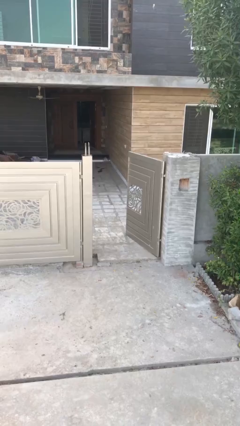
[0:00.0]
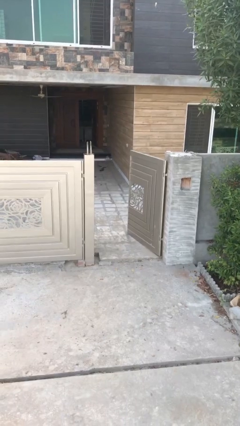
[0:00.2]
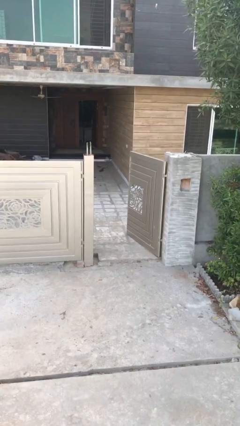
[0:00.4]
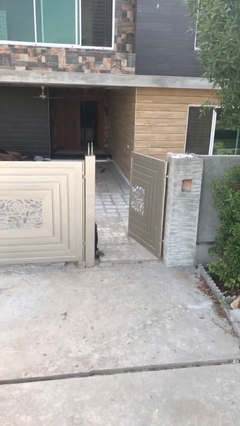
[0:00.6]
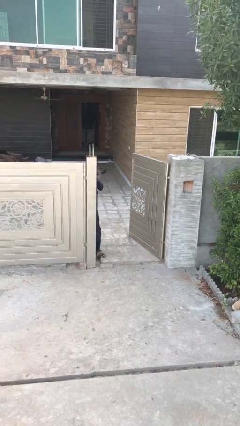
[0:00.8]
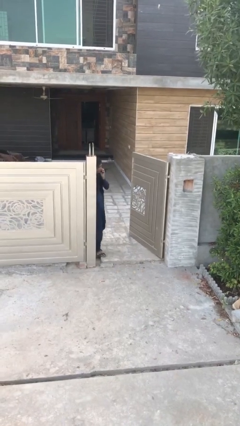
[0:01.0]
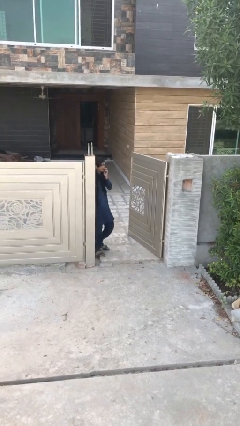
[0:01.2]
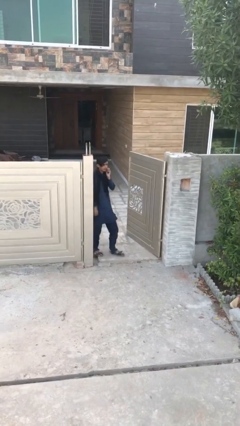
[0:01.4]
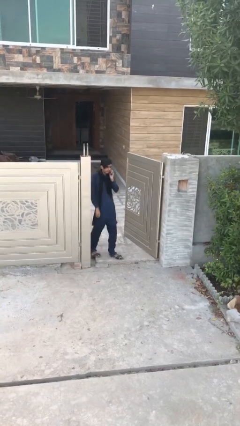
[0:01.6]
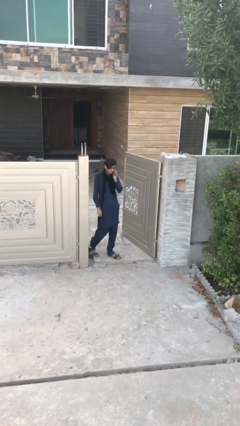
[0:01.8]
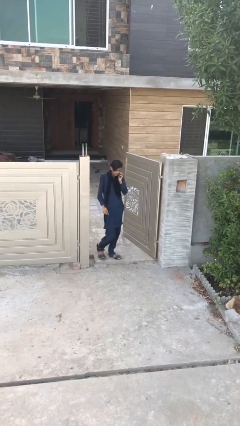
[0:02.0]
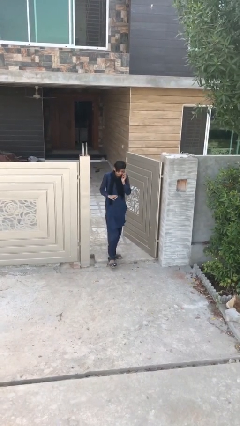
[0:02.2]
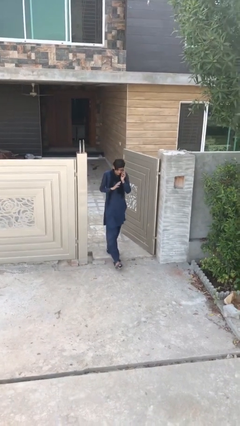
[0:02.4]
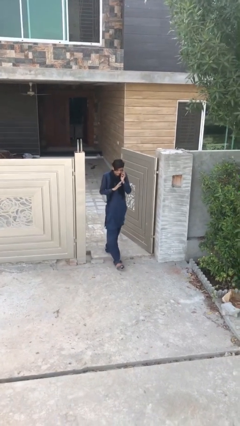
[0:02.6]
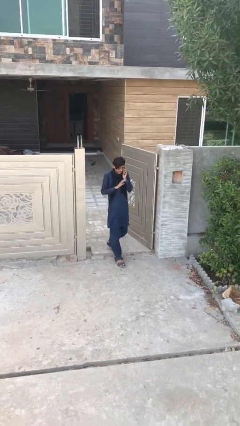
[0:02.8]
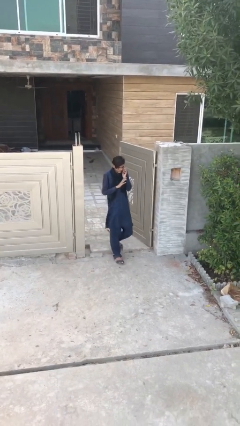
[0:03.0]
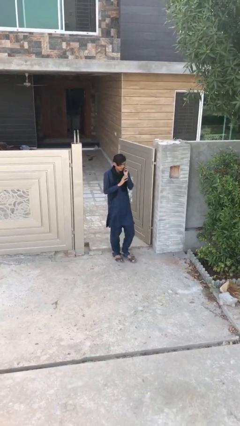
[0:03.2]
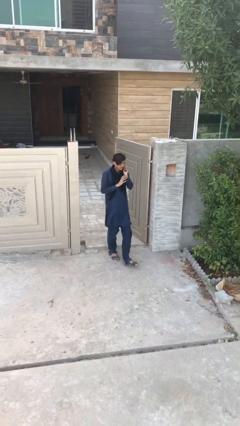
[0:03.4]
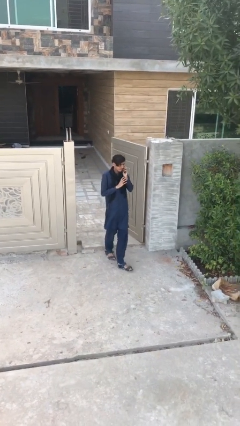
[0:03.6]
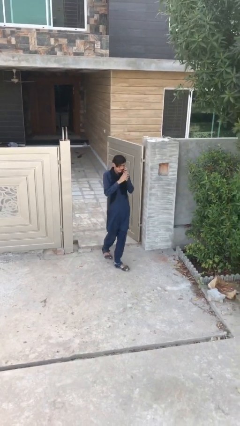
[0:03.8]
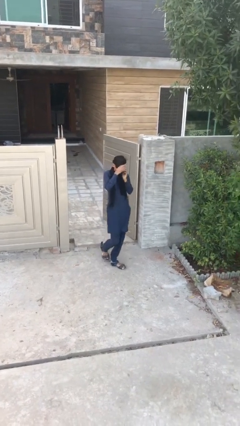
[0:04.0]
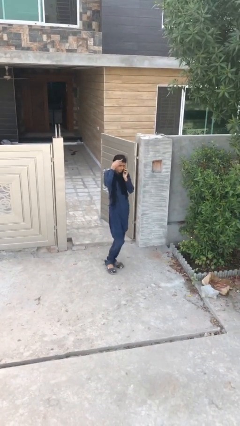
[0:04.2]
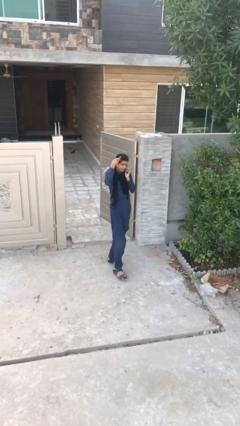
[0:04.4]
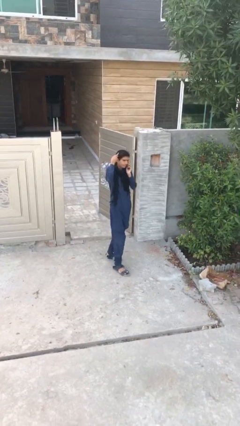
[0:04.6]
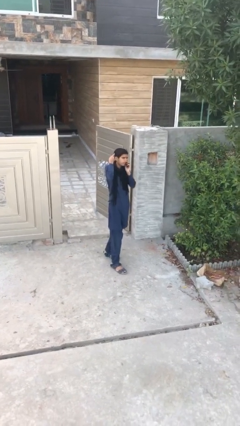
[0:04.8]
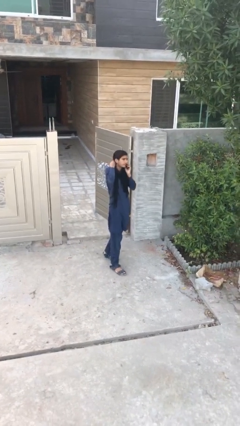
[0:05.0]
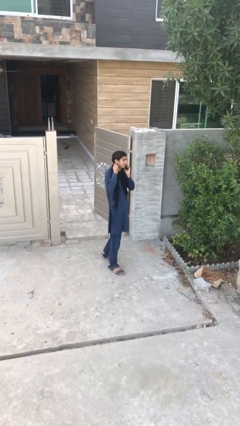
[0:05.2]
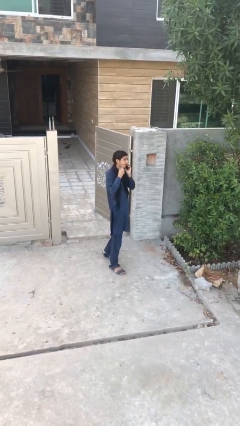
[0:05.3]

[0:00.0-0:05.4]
person enters scene through structure

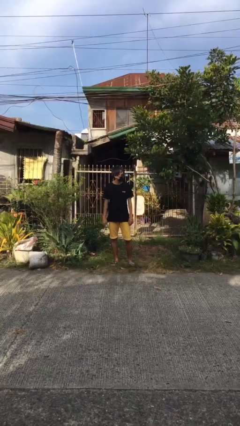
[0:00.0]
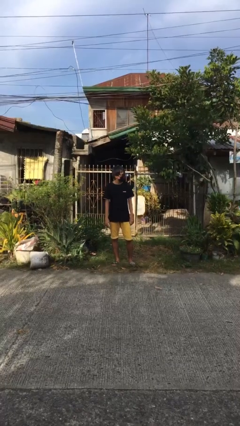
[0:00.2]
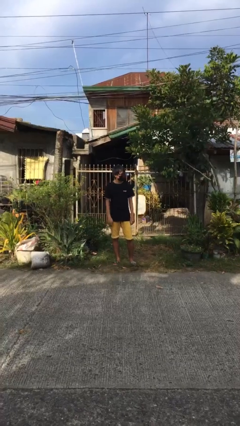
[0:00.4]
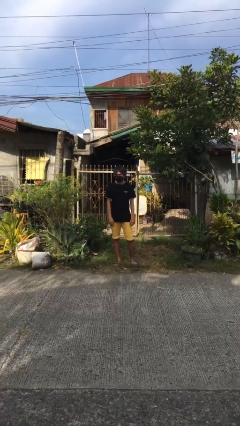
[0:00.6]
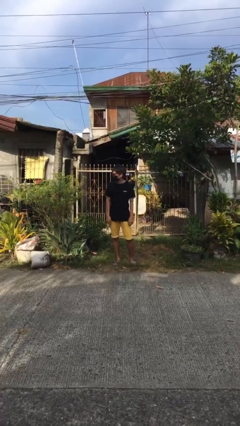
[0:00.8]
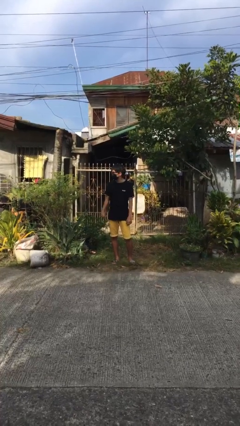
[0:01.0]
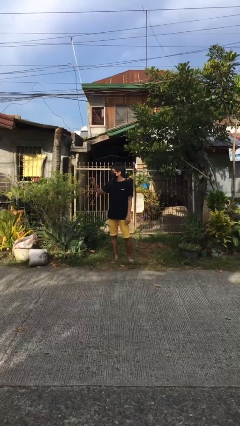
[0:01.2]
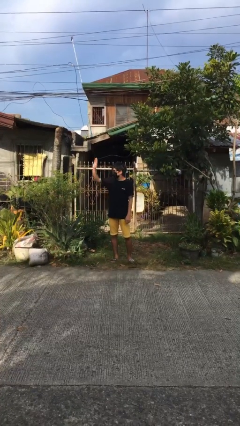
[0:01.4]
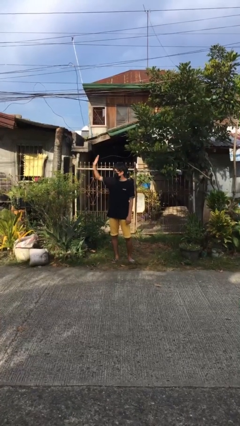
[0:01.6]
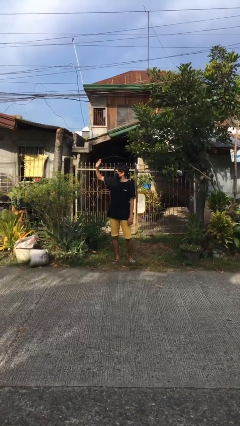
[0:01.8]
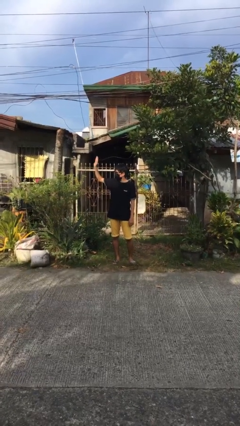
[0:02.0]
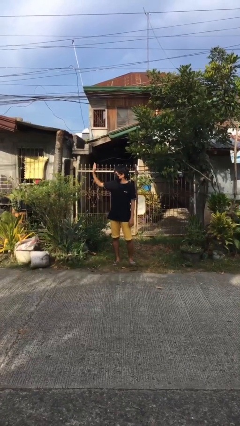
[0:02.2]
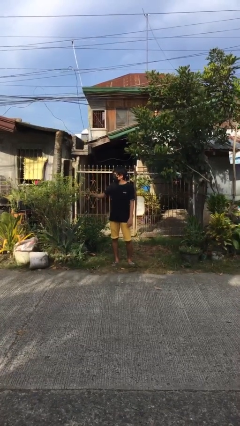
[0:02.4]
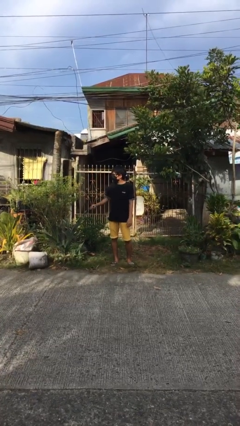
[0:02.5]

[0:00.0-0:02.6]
person waves at person

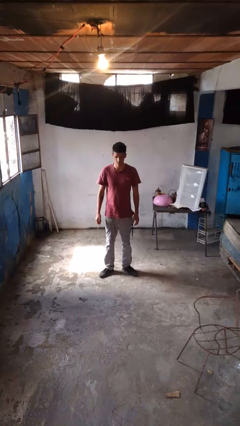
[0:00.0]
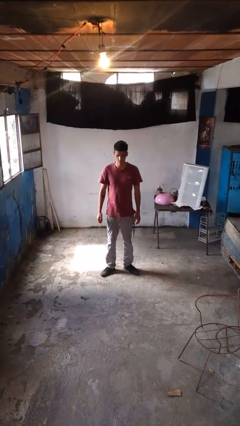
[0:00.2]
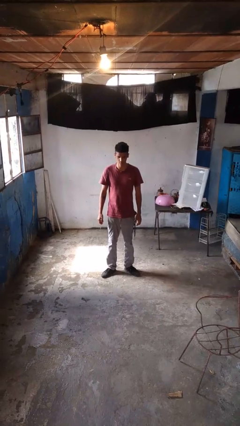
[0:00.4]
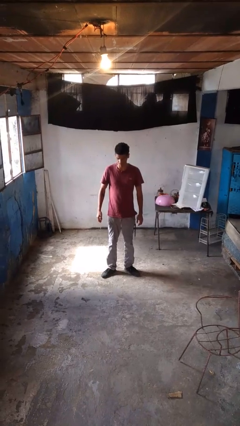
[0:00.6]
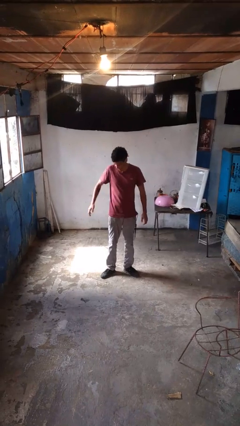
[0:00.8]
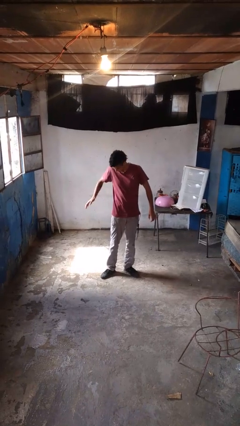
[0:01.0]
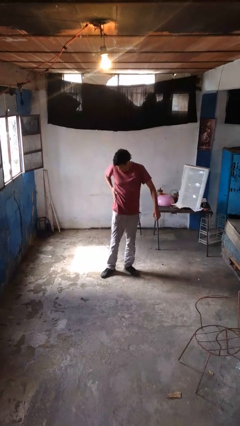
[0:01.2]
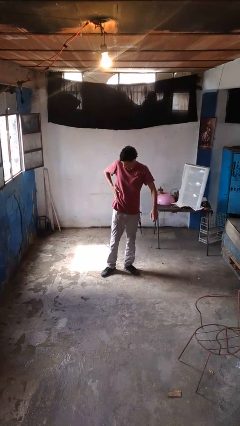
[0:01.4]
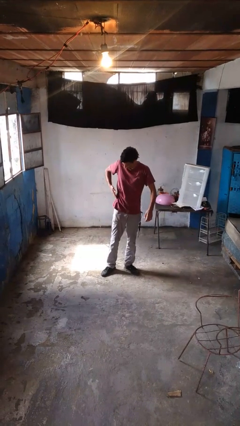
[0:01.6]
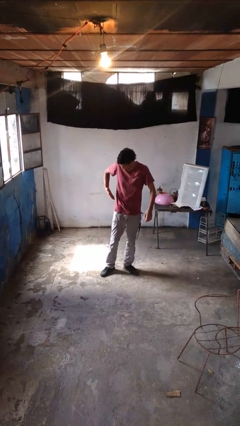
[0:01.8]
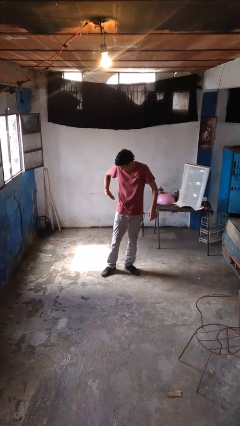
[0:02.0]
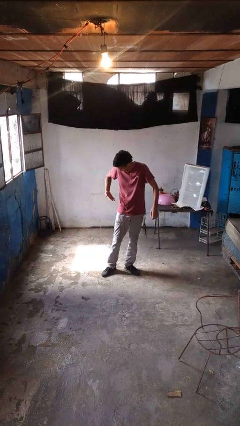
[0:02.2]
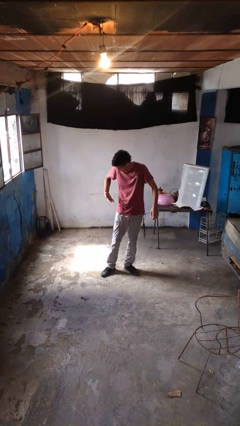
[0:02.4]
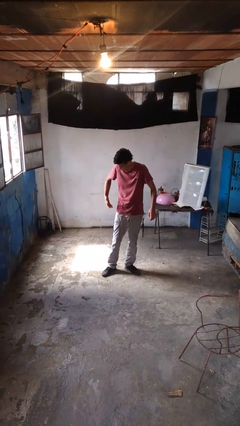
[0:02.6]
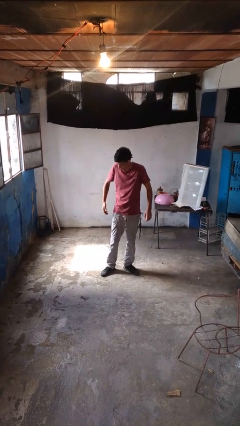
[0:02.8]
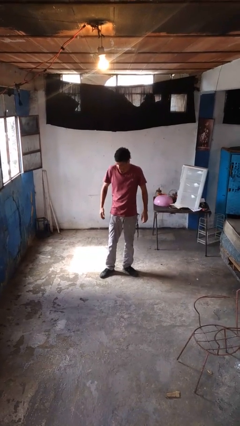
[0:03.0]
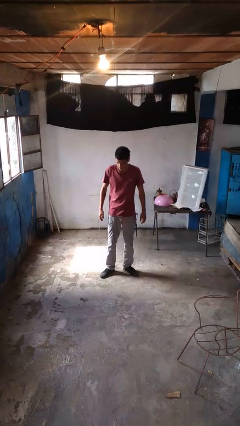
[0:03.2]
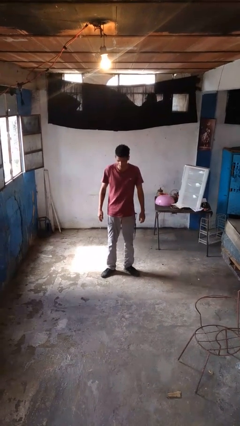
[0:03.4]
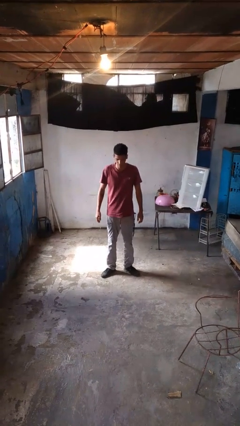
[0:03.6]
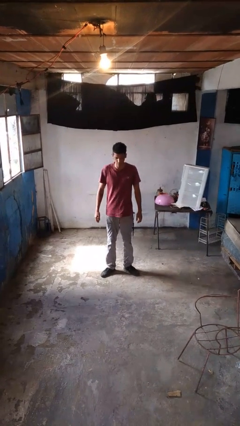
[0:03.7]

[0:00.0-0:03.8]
person swats bug

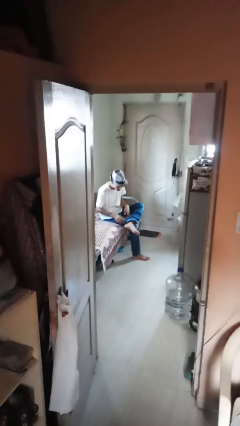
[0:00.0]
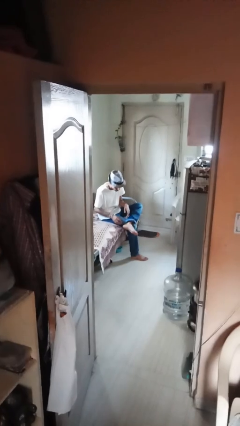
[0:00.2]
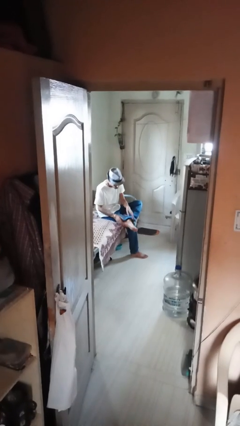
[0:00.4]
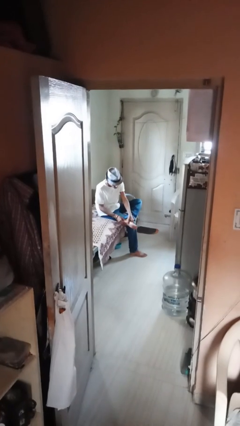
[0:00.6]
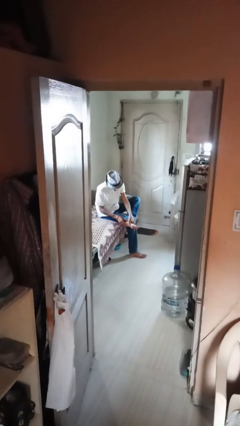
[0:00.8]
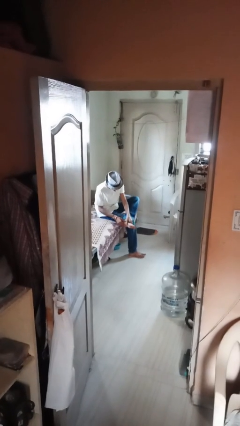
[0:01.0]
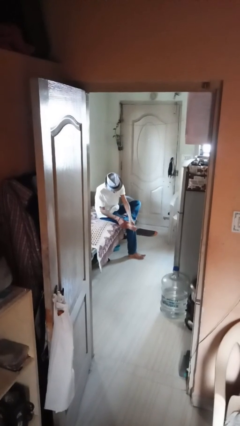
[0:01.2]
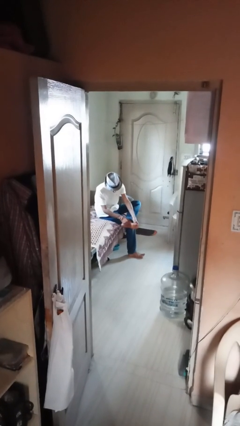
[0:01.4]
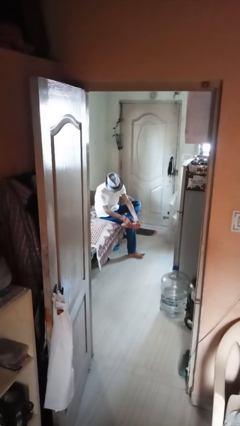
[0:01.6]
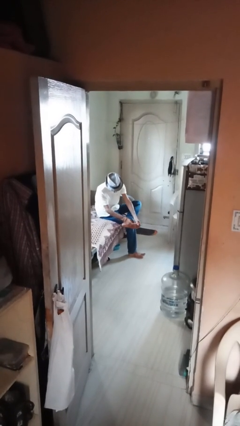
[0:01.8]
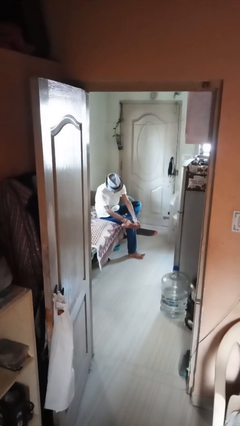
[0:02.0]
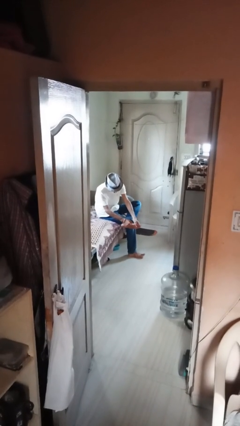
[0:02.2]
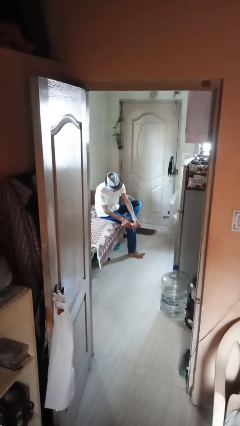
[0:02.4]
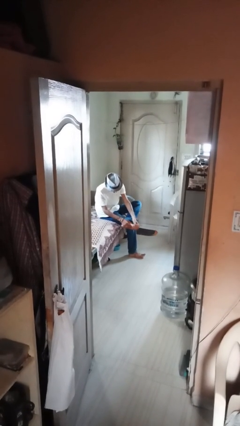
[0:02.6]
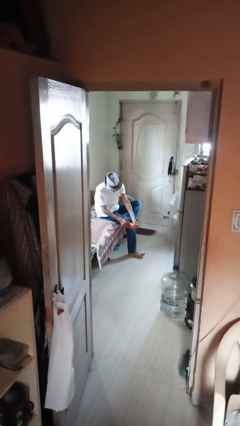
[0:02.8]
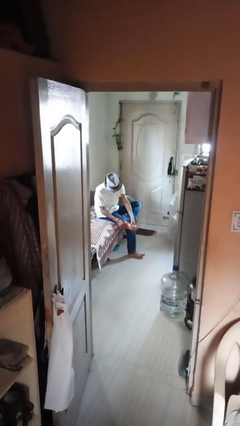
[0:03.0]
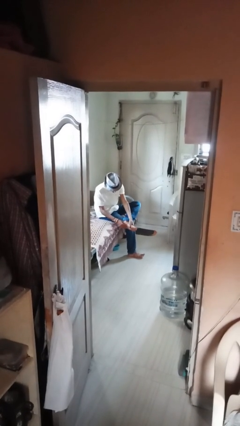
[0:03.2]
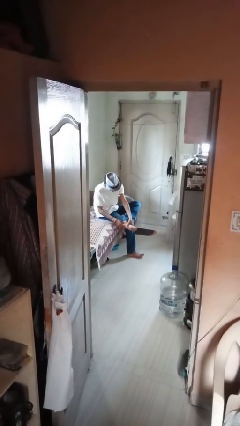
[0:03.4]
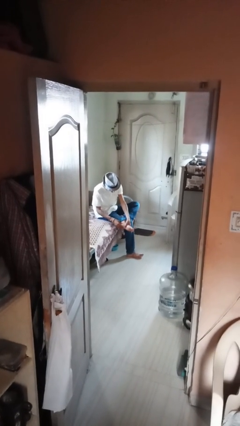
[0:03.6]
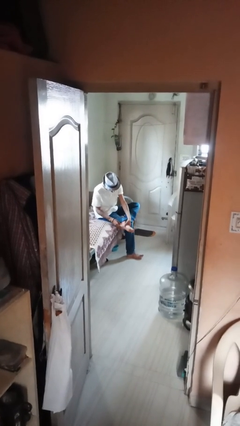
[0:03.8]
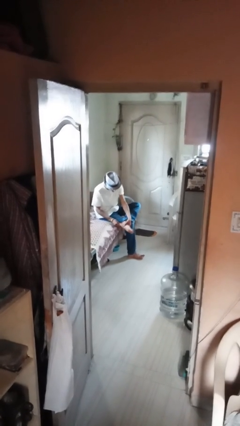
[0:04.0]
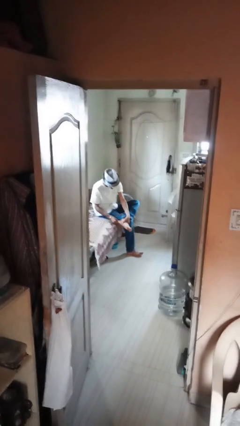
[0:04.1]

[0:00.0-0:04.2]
person rubs foot

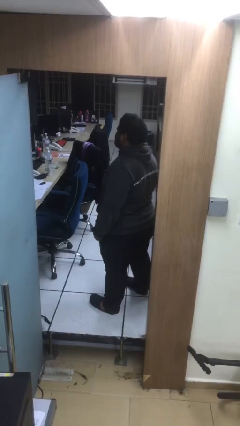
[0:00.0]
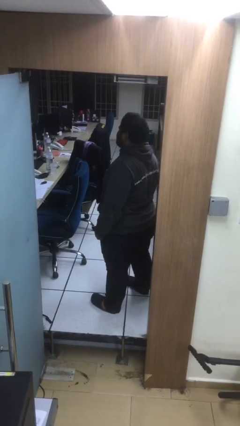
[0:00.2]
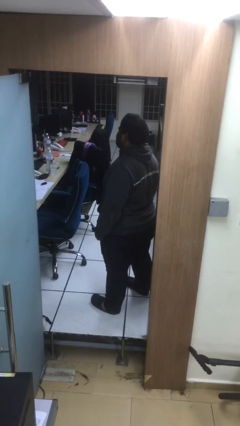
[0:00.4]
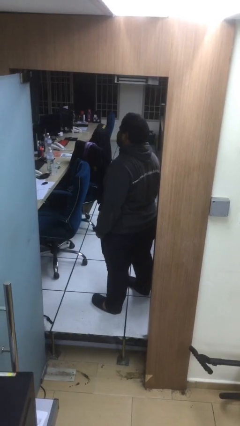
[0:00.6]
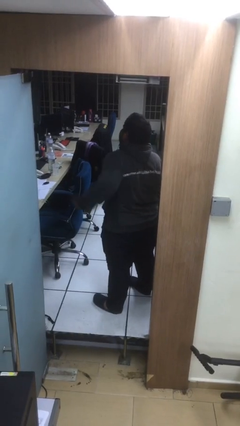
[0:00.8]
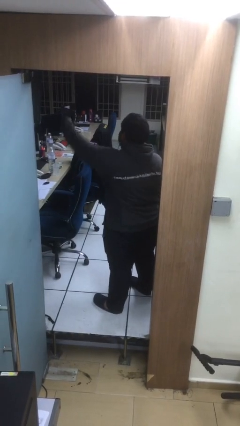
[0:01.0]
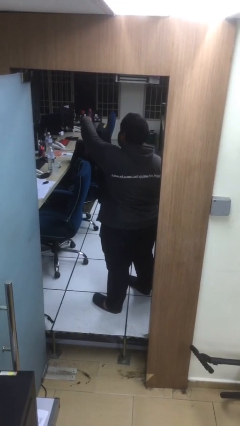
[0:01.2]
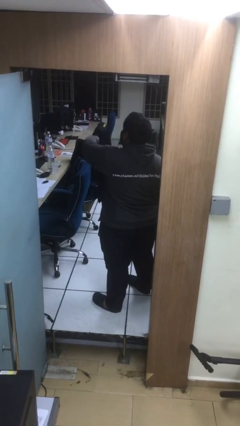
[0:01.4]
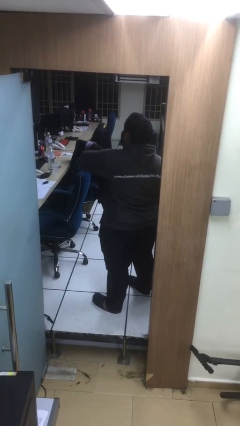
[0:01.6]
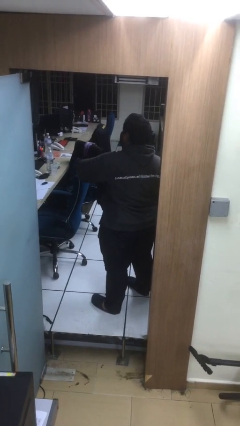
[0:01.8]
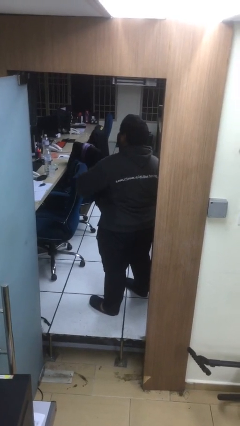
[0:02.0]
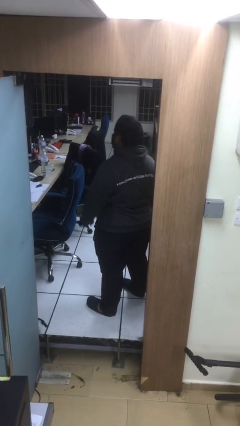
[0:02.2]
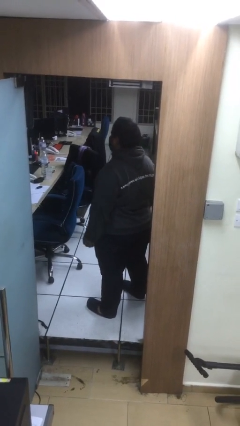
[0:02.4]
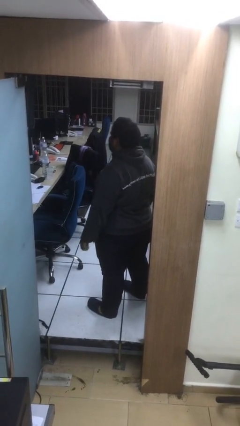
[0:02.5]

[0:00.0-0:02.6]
person punches
